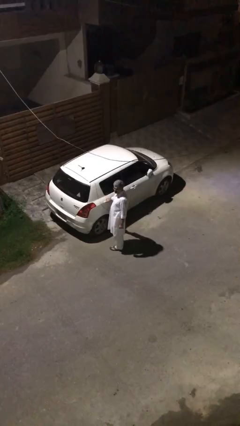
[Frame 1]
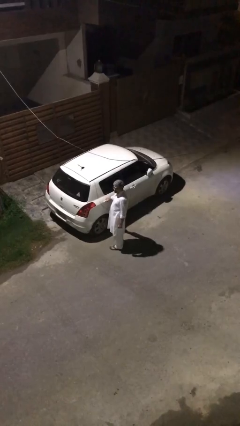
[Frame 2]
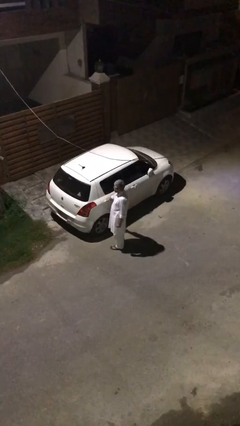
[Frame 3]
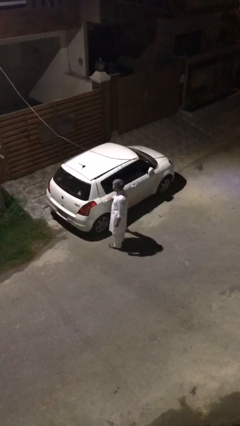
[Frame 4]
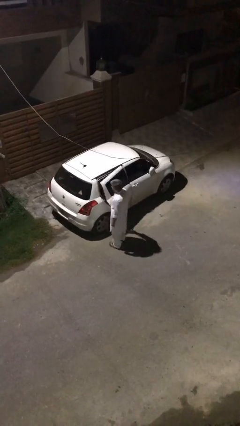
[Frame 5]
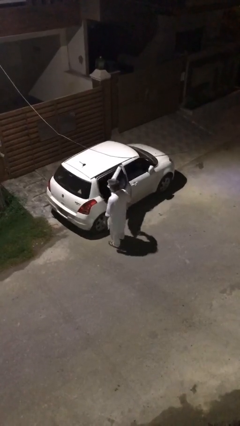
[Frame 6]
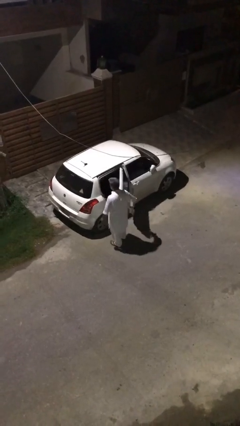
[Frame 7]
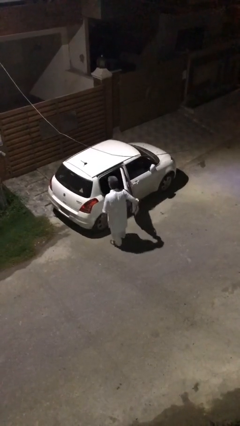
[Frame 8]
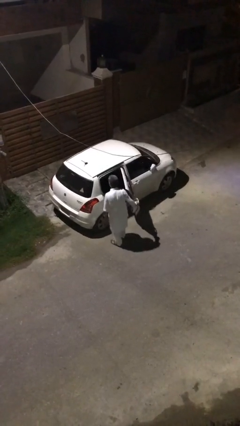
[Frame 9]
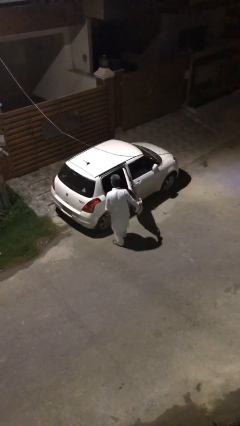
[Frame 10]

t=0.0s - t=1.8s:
person opens car door

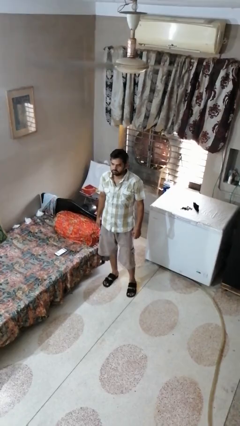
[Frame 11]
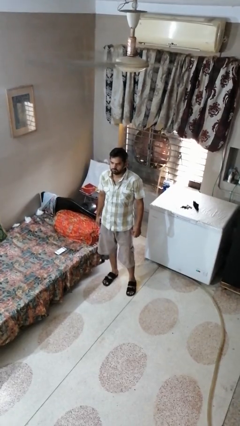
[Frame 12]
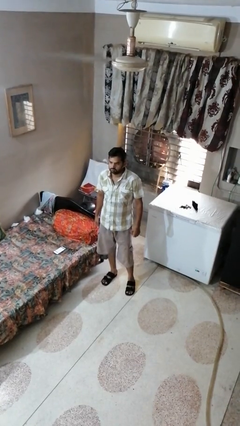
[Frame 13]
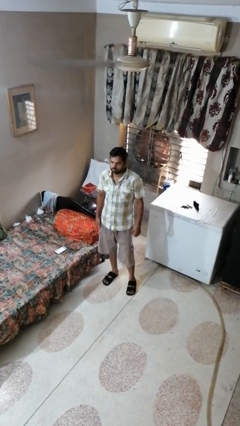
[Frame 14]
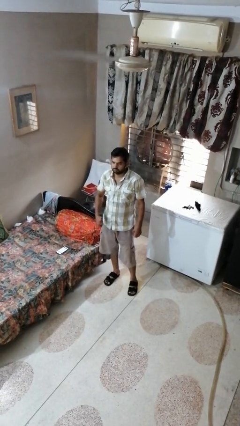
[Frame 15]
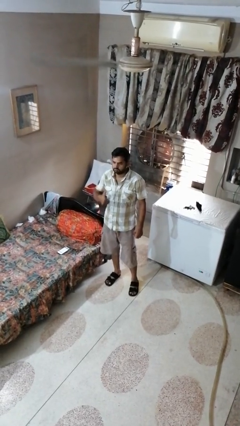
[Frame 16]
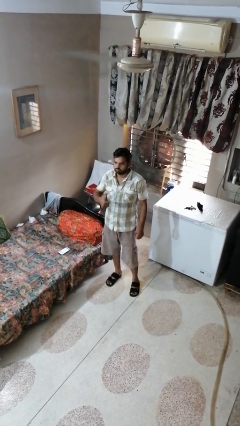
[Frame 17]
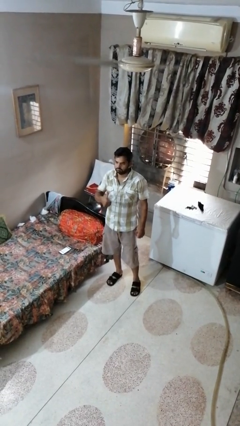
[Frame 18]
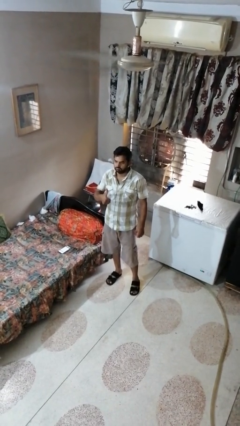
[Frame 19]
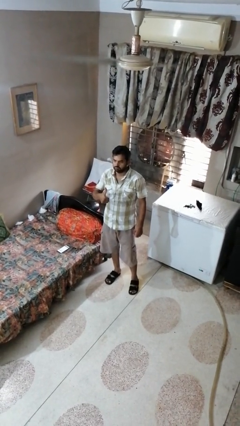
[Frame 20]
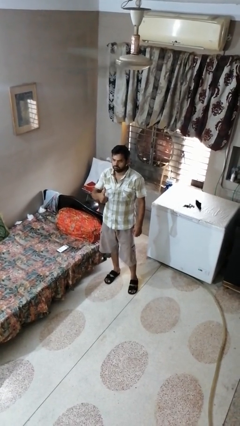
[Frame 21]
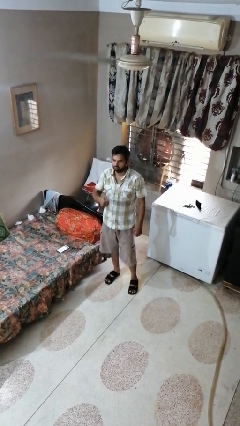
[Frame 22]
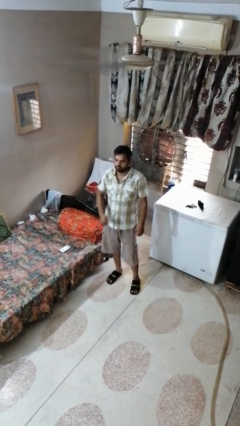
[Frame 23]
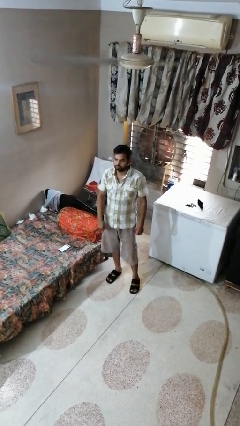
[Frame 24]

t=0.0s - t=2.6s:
person gestures thumbs up

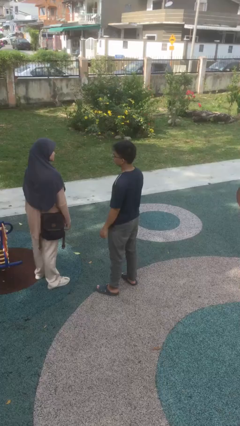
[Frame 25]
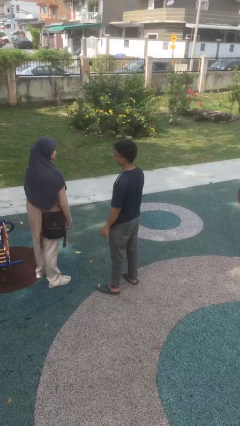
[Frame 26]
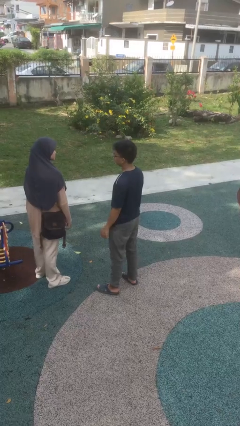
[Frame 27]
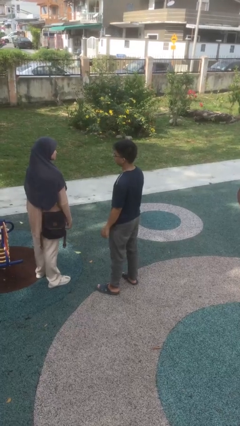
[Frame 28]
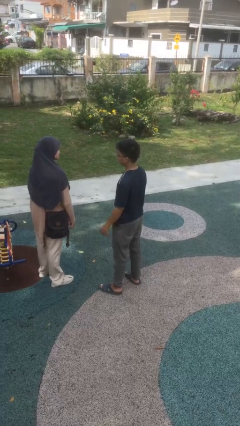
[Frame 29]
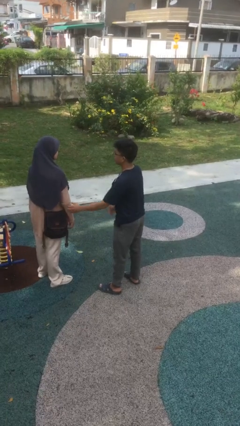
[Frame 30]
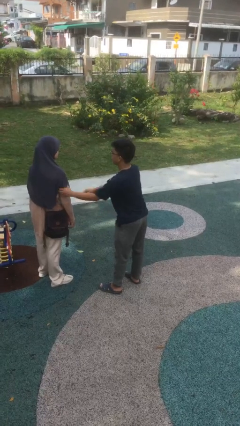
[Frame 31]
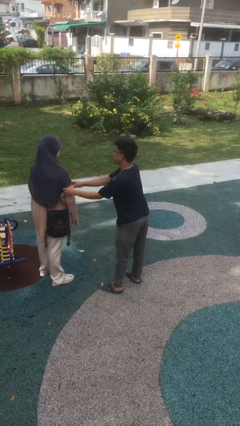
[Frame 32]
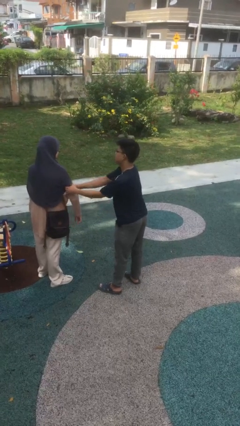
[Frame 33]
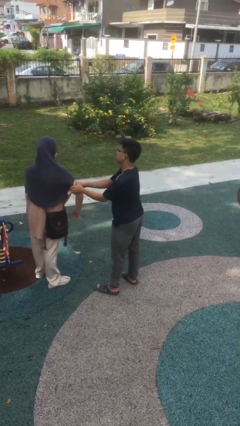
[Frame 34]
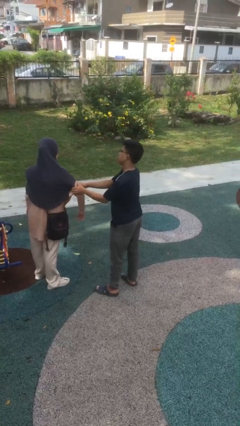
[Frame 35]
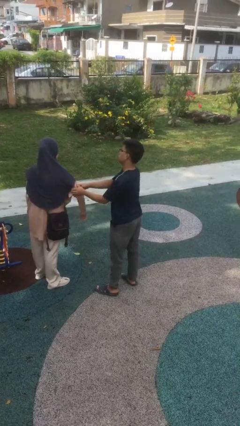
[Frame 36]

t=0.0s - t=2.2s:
person grabs person by bicep

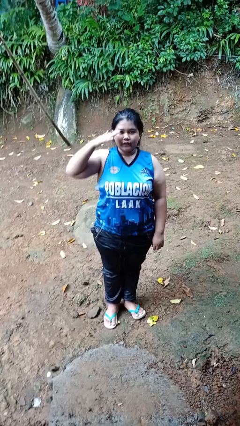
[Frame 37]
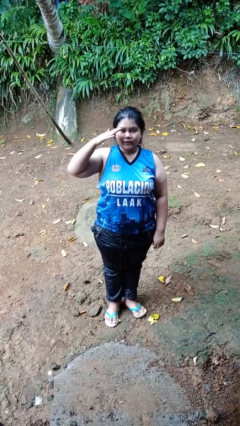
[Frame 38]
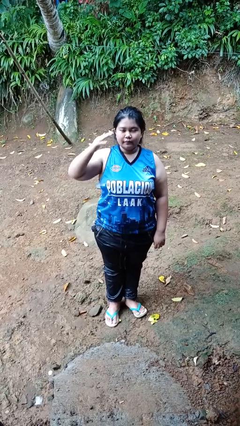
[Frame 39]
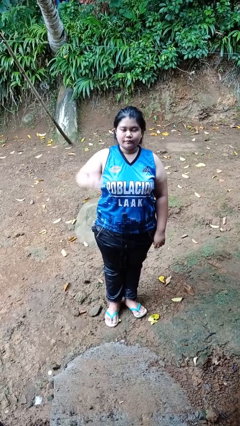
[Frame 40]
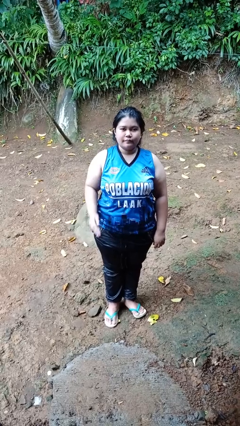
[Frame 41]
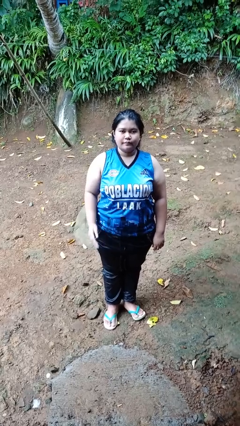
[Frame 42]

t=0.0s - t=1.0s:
person salutes

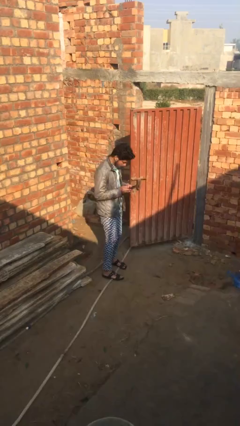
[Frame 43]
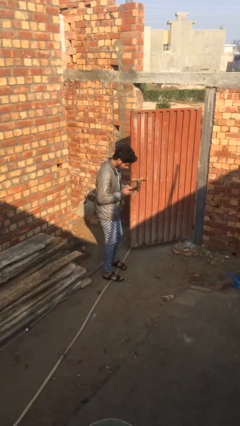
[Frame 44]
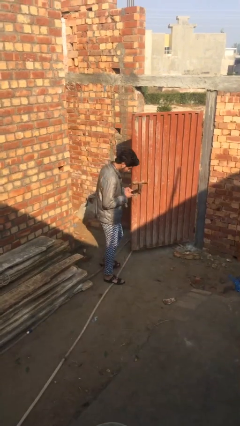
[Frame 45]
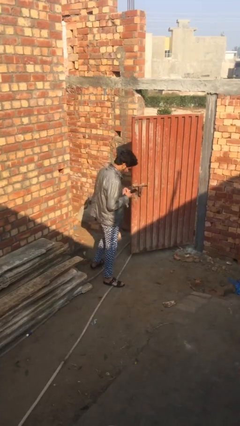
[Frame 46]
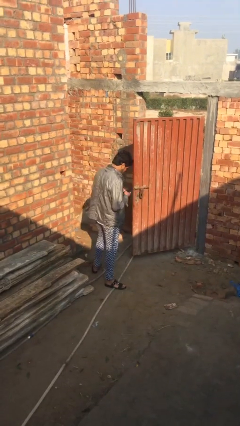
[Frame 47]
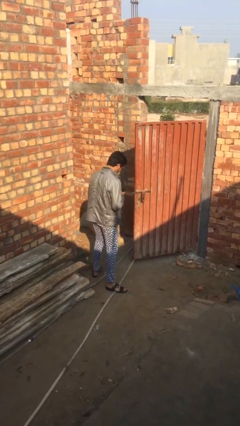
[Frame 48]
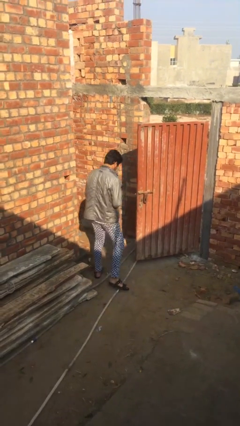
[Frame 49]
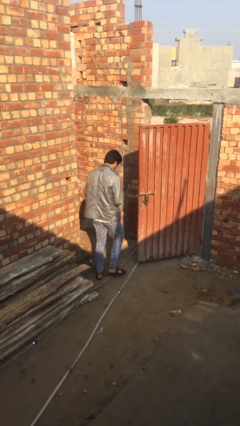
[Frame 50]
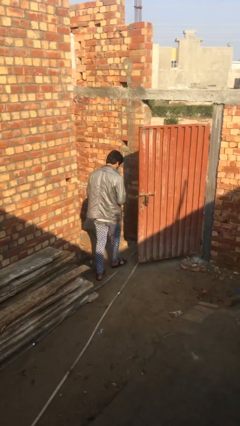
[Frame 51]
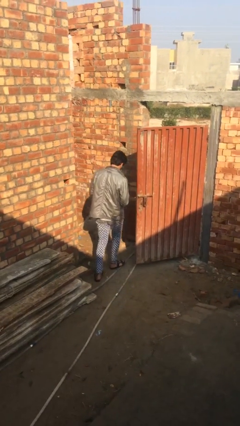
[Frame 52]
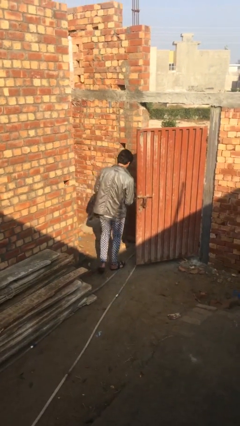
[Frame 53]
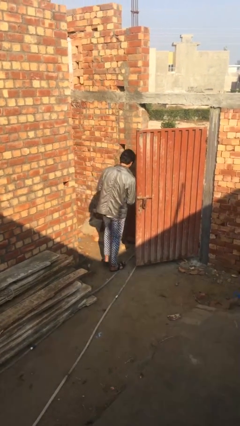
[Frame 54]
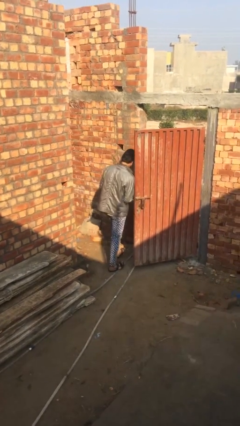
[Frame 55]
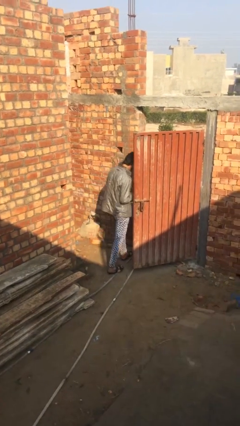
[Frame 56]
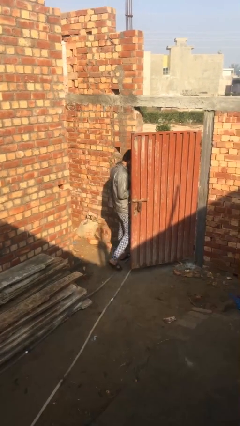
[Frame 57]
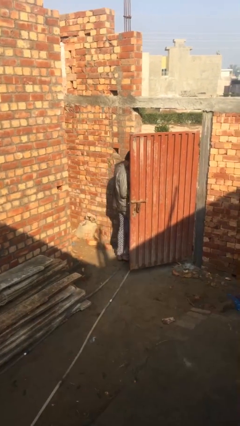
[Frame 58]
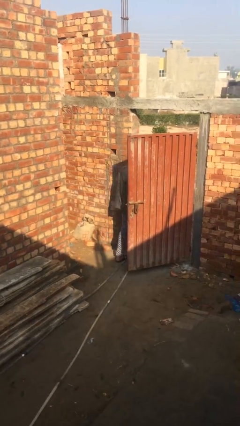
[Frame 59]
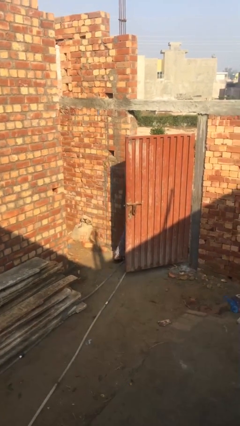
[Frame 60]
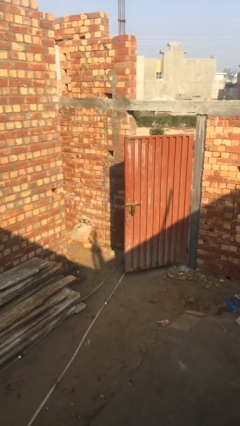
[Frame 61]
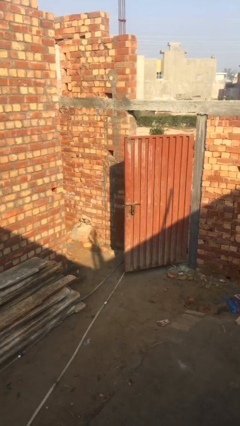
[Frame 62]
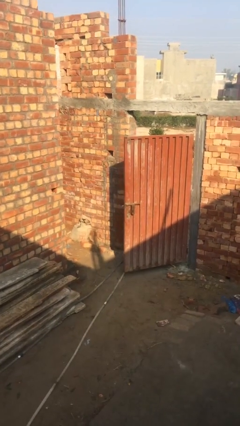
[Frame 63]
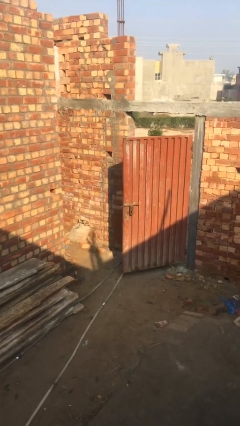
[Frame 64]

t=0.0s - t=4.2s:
person exits scene through structure

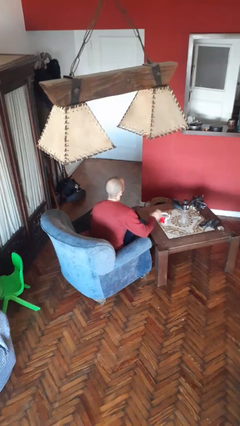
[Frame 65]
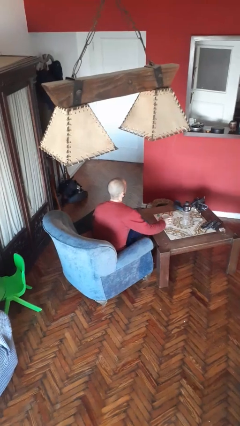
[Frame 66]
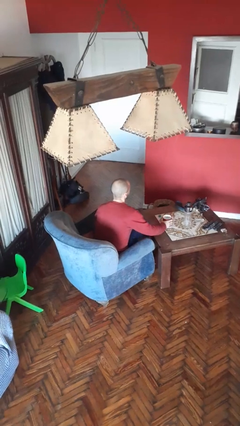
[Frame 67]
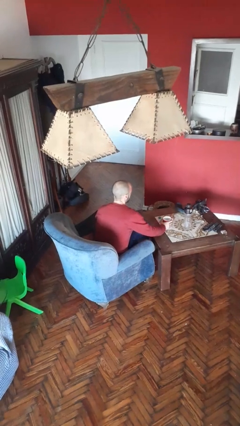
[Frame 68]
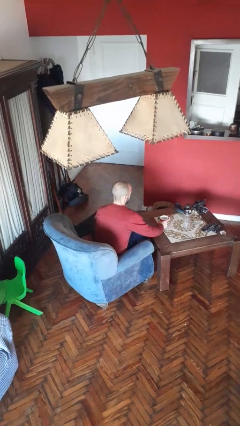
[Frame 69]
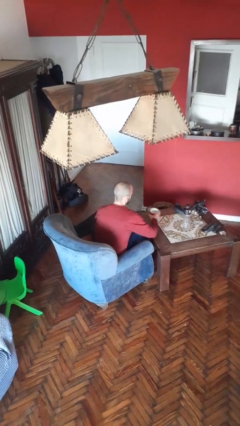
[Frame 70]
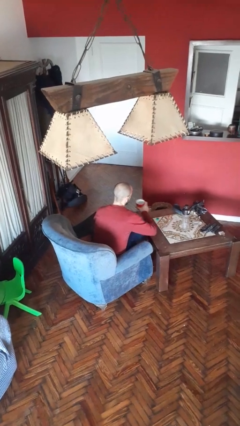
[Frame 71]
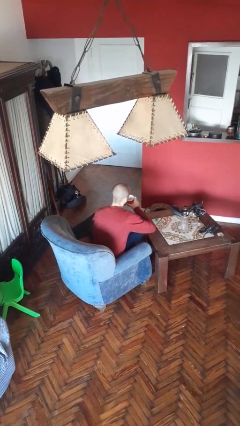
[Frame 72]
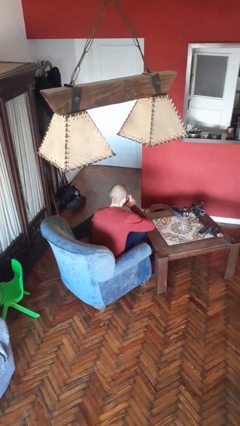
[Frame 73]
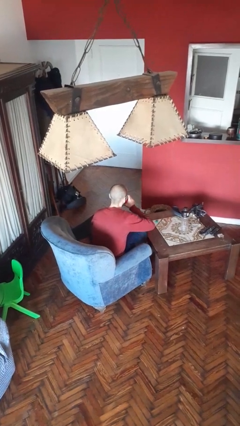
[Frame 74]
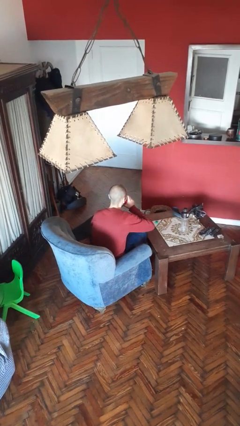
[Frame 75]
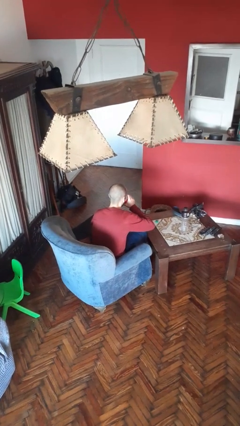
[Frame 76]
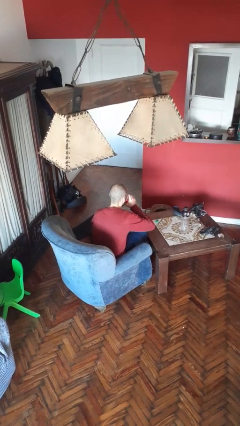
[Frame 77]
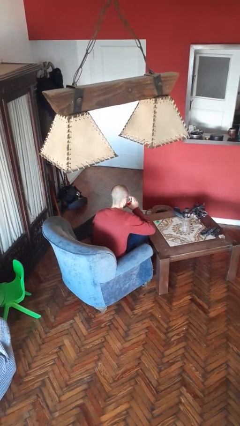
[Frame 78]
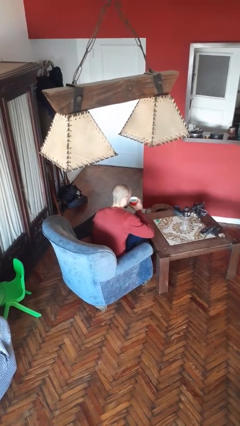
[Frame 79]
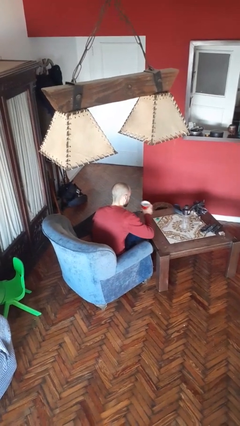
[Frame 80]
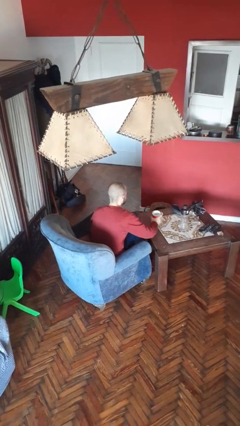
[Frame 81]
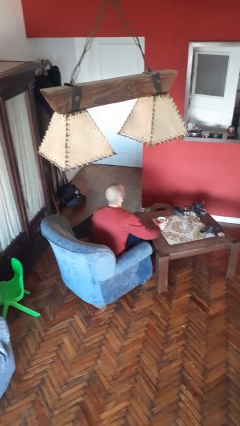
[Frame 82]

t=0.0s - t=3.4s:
person drinks from cup

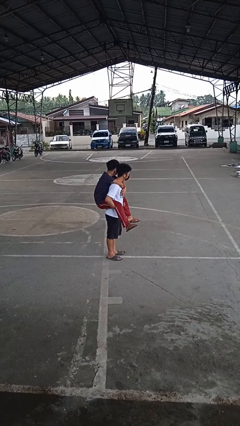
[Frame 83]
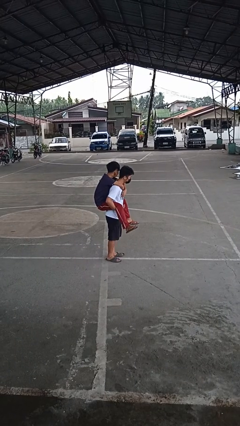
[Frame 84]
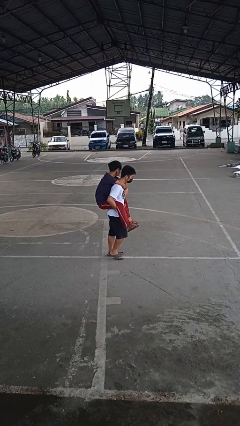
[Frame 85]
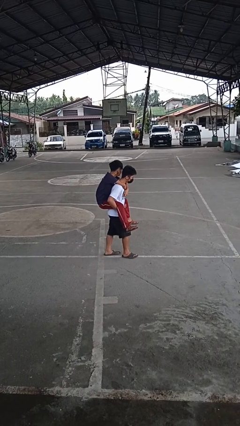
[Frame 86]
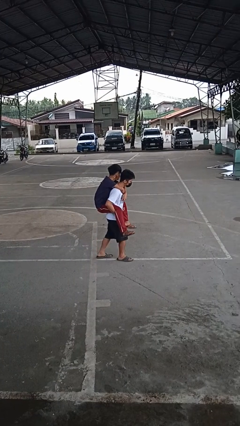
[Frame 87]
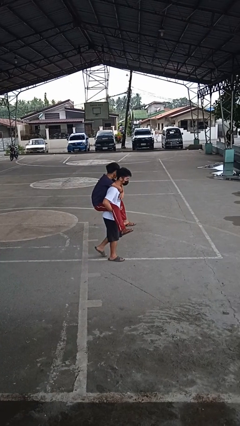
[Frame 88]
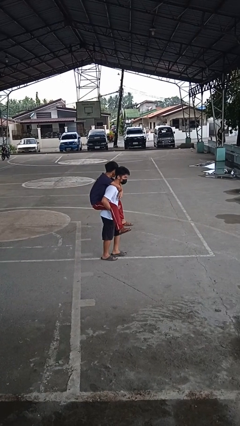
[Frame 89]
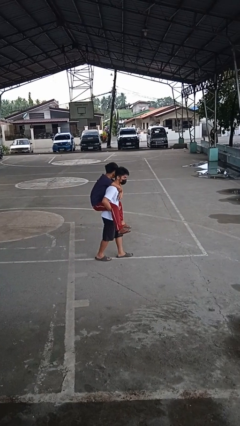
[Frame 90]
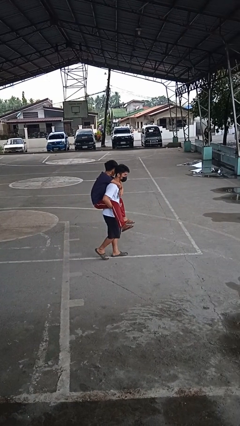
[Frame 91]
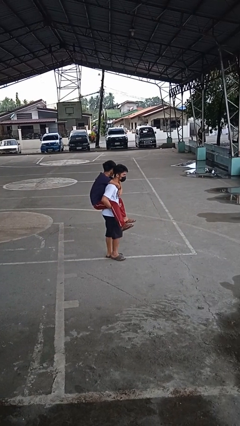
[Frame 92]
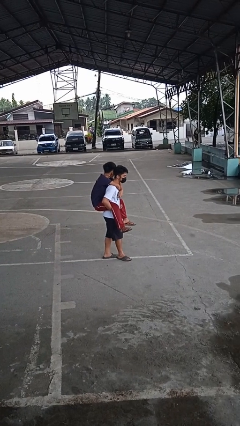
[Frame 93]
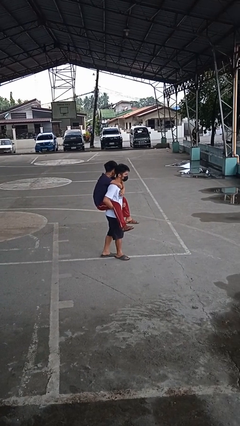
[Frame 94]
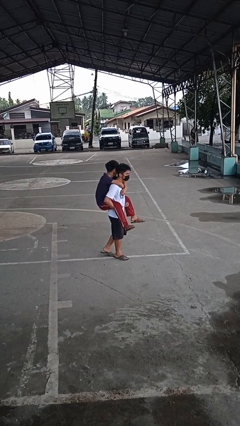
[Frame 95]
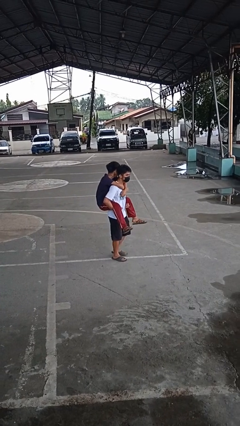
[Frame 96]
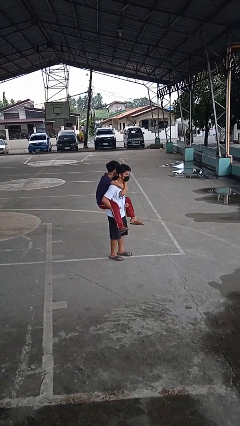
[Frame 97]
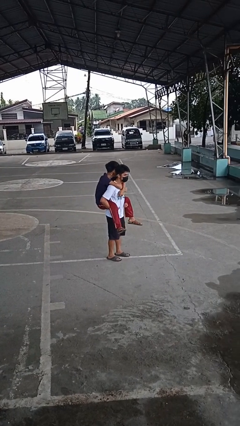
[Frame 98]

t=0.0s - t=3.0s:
person carries person on back
